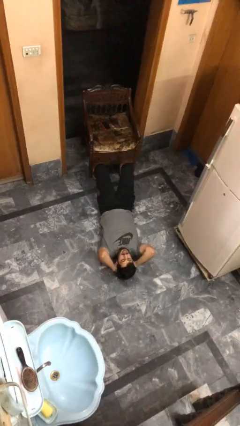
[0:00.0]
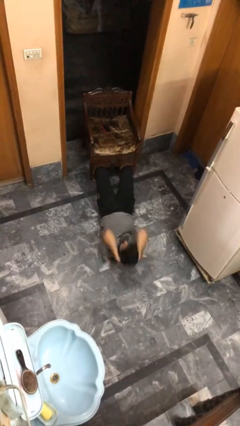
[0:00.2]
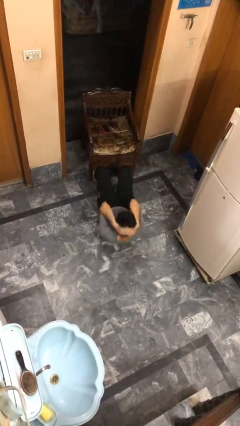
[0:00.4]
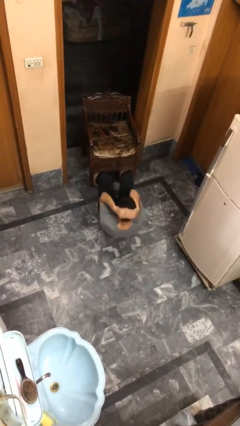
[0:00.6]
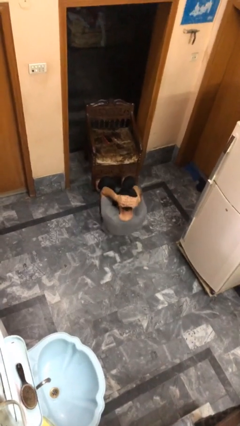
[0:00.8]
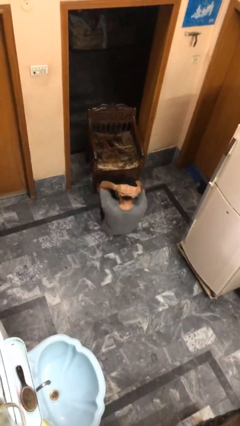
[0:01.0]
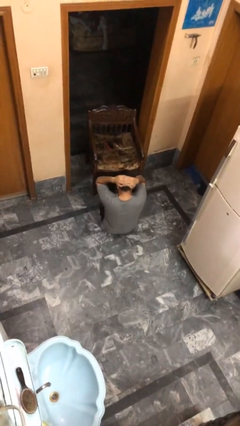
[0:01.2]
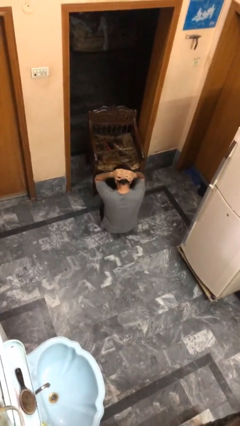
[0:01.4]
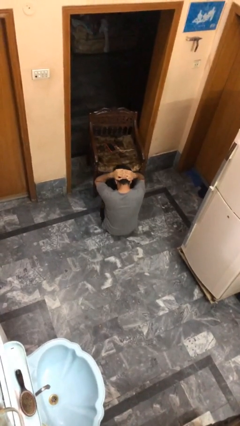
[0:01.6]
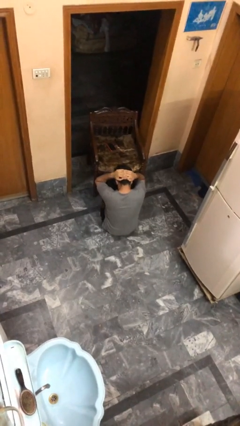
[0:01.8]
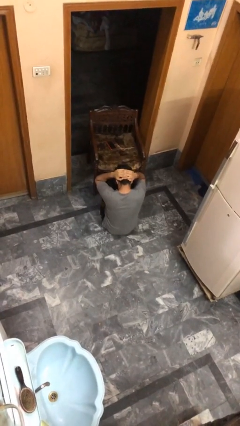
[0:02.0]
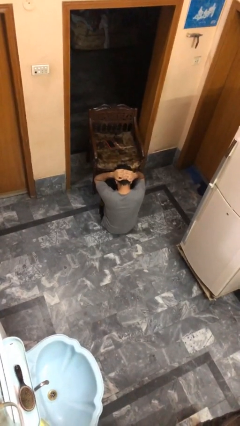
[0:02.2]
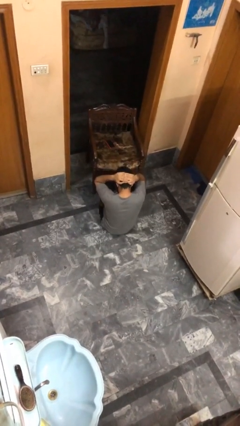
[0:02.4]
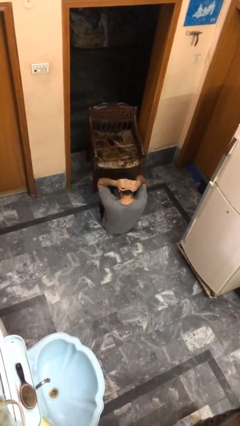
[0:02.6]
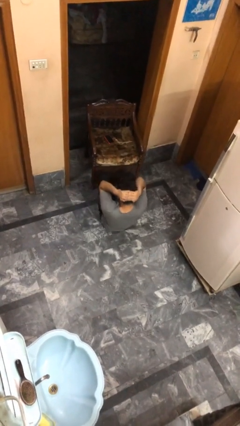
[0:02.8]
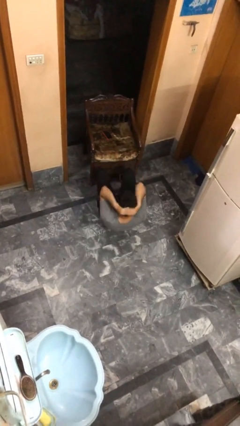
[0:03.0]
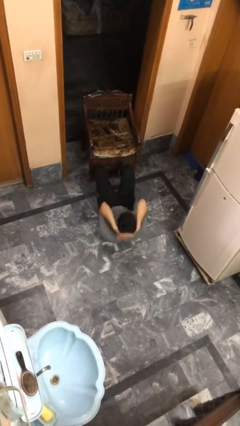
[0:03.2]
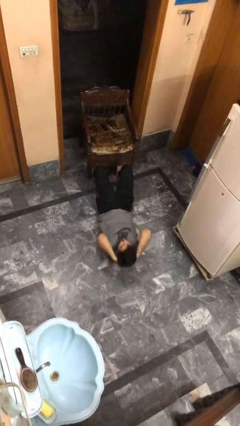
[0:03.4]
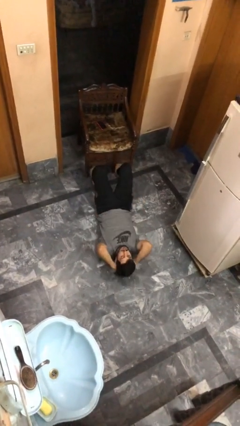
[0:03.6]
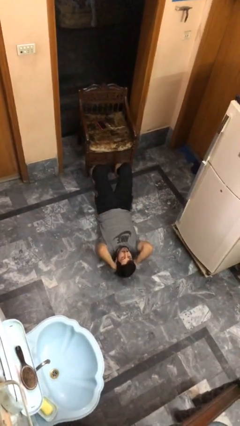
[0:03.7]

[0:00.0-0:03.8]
person exercises with situp

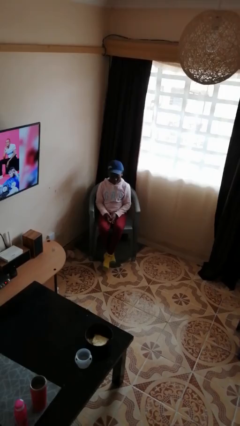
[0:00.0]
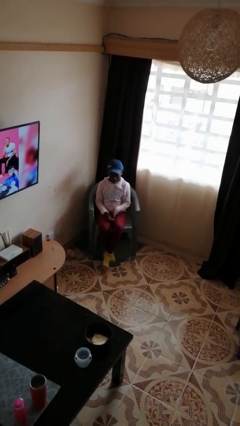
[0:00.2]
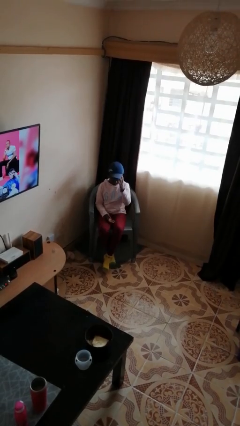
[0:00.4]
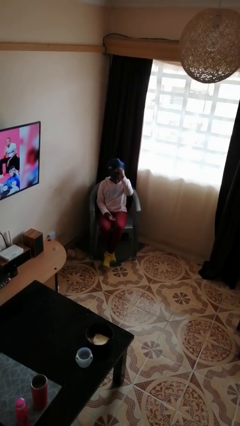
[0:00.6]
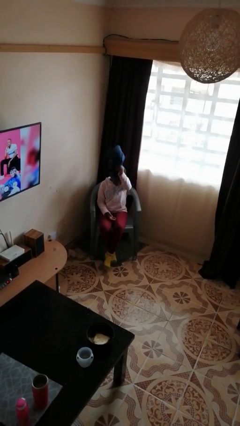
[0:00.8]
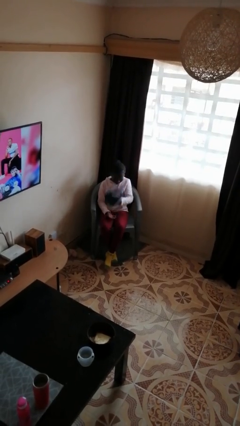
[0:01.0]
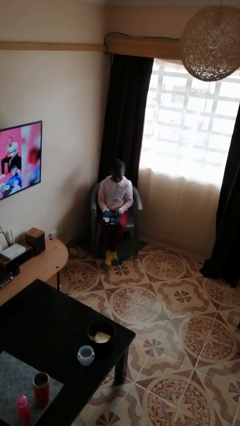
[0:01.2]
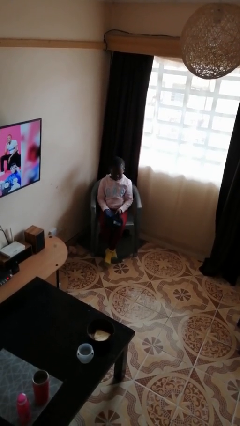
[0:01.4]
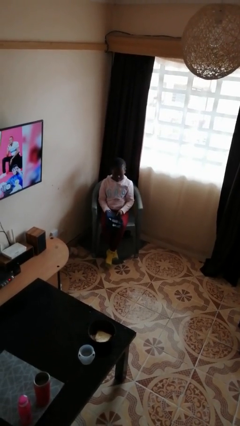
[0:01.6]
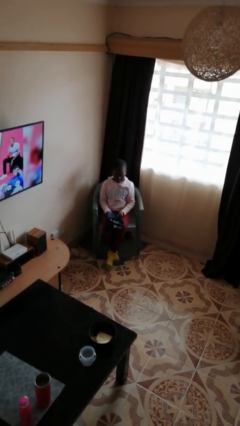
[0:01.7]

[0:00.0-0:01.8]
person takes off hat

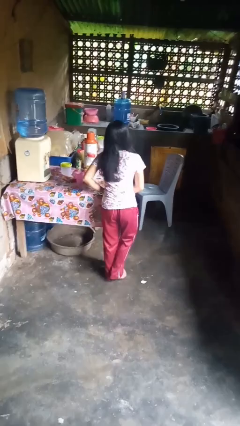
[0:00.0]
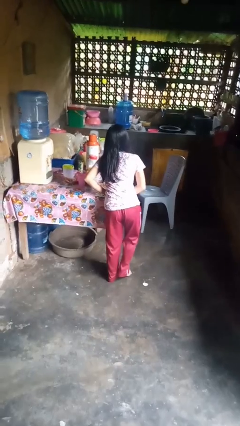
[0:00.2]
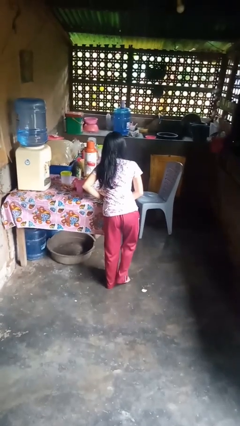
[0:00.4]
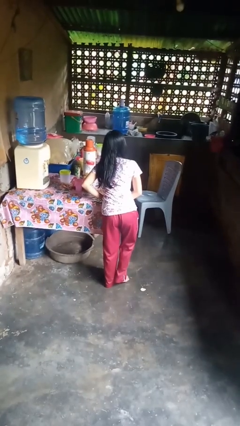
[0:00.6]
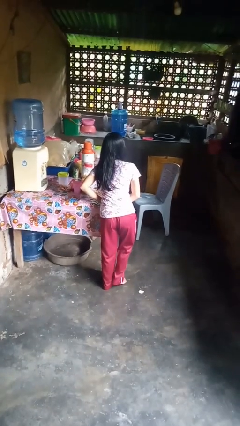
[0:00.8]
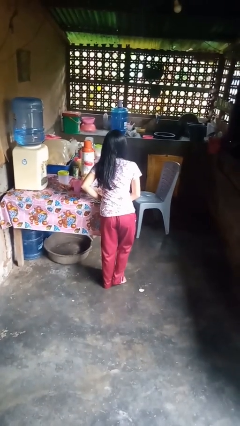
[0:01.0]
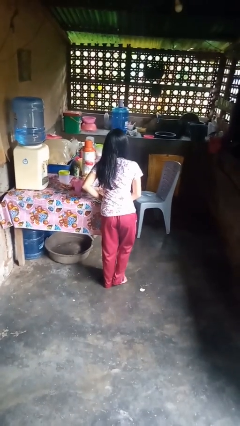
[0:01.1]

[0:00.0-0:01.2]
person bumps into table

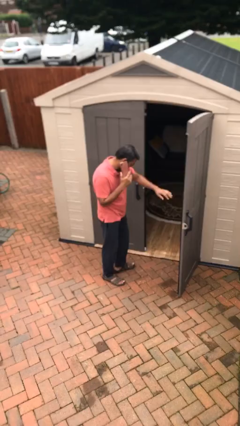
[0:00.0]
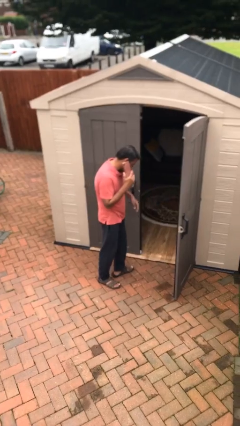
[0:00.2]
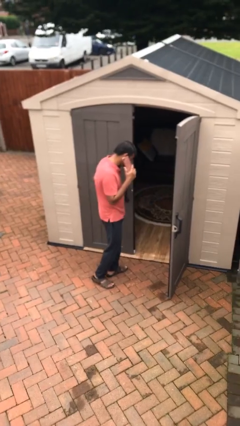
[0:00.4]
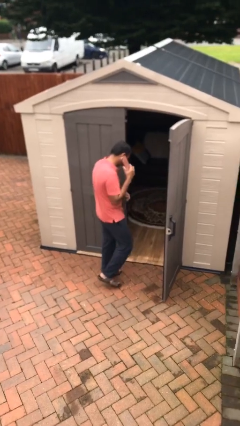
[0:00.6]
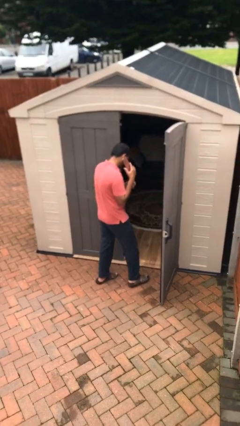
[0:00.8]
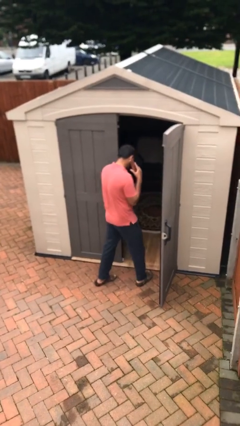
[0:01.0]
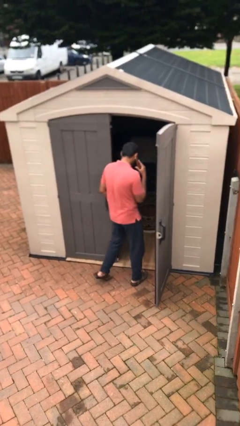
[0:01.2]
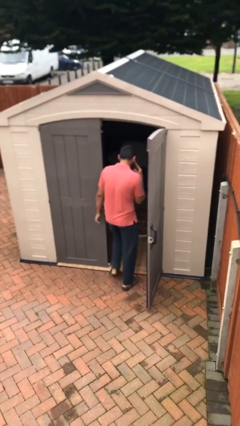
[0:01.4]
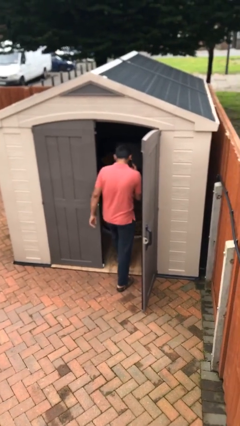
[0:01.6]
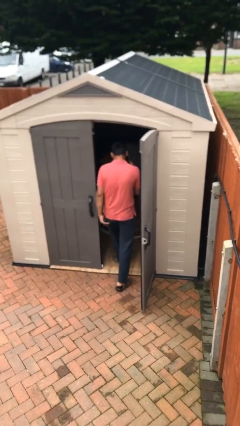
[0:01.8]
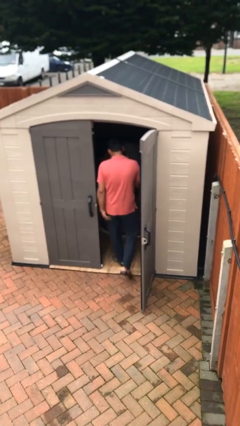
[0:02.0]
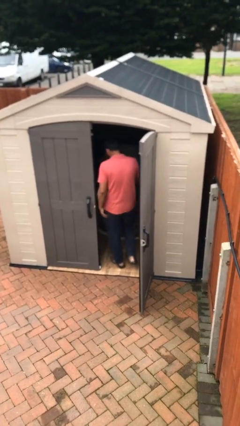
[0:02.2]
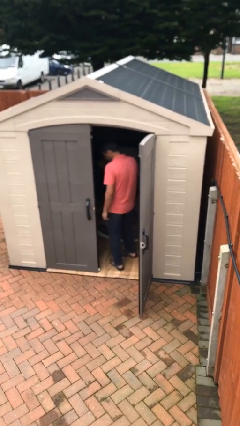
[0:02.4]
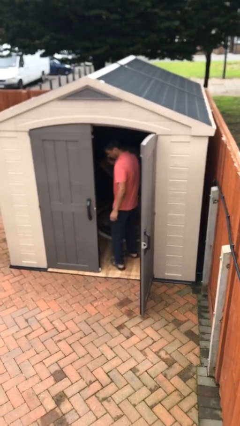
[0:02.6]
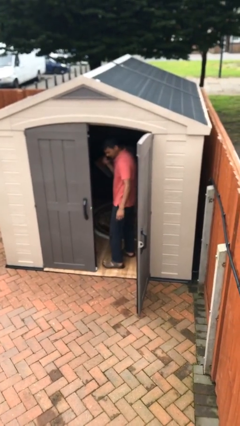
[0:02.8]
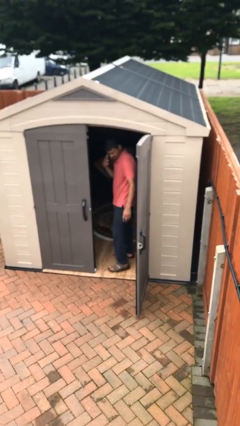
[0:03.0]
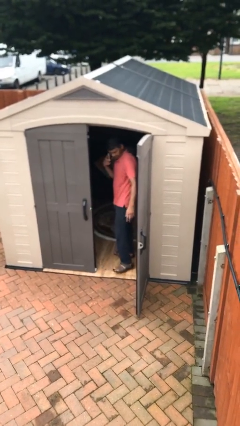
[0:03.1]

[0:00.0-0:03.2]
person exits scene through structure

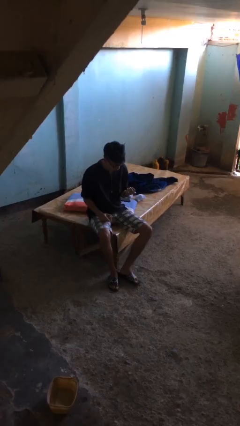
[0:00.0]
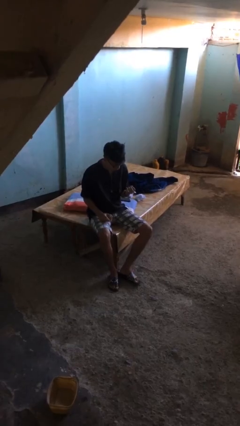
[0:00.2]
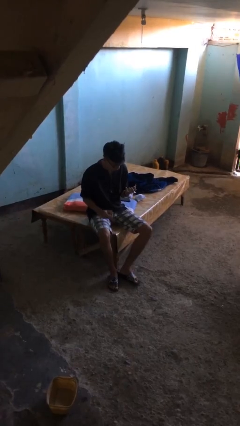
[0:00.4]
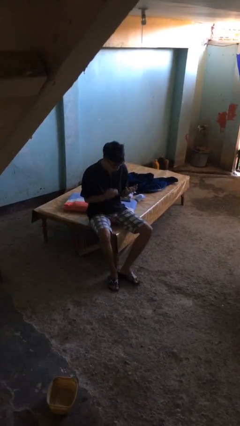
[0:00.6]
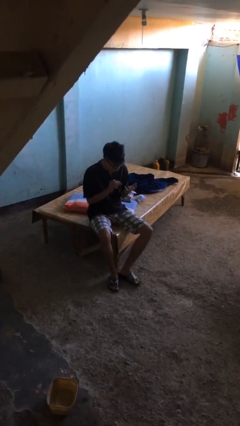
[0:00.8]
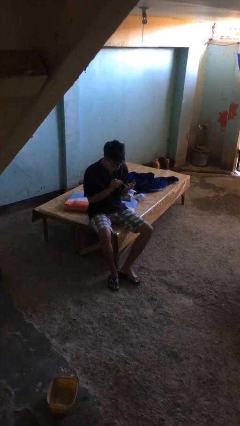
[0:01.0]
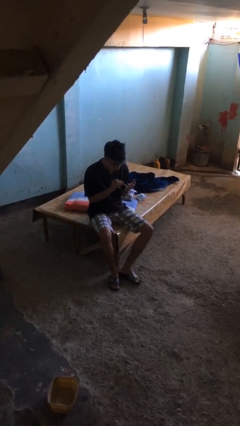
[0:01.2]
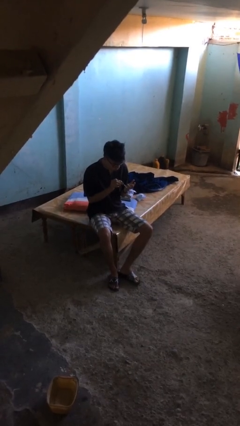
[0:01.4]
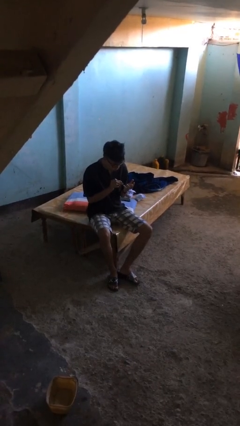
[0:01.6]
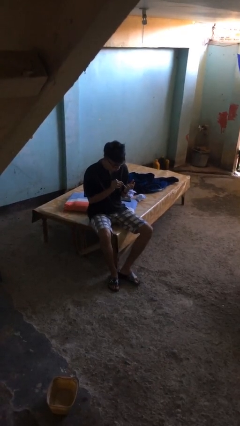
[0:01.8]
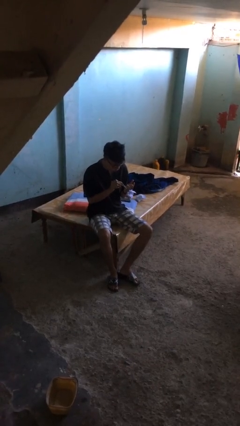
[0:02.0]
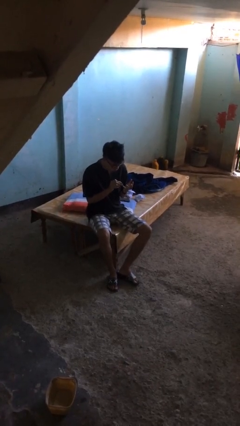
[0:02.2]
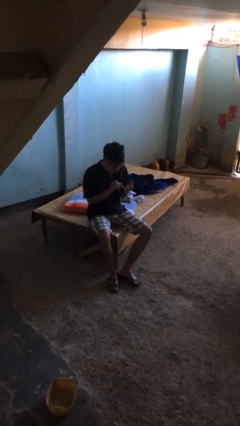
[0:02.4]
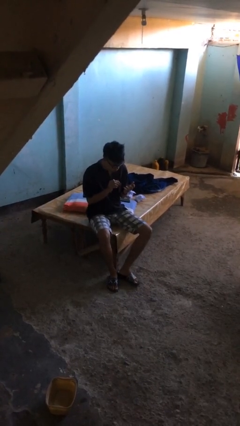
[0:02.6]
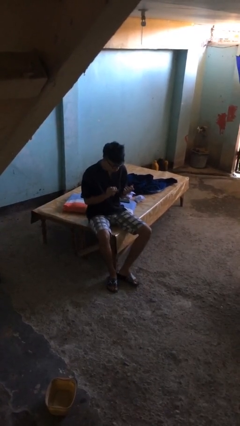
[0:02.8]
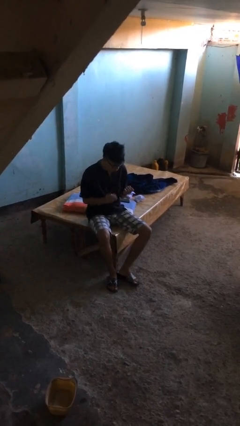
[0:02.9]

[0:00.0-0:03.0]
person clips fingernails

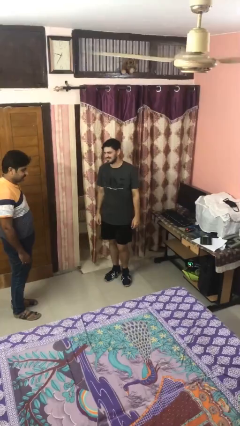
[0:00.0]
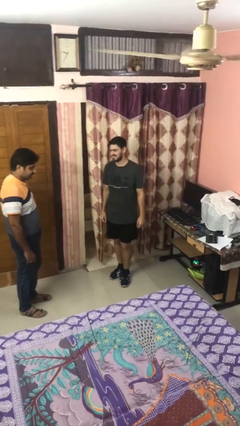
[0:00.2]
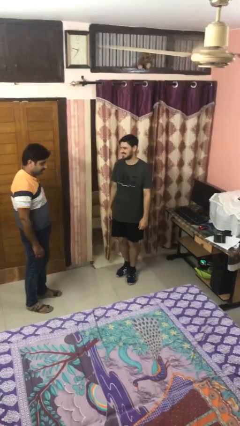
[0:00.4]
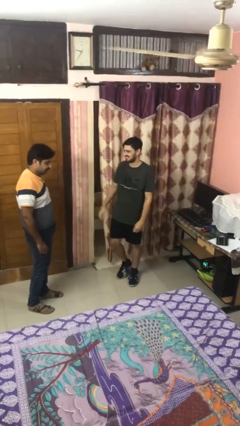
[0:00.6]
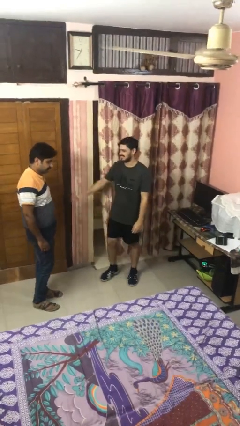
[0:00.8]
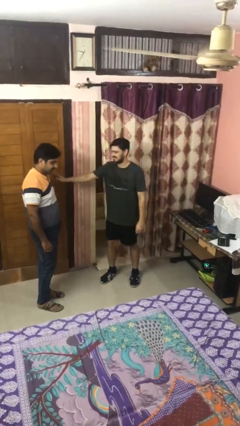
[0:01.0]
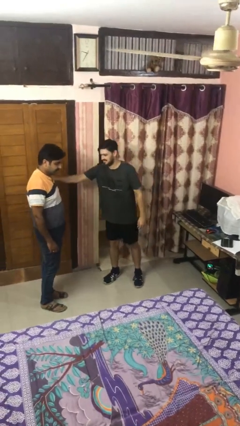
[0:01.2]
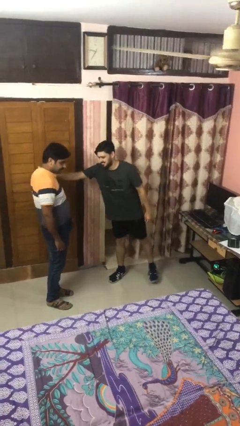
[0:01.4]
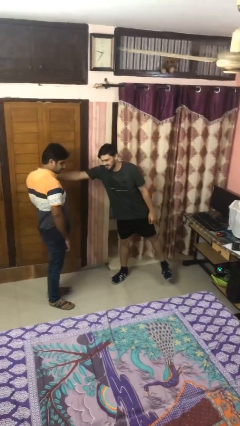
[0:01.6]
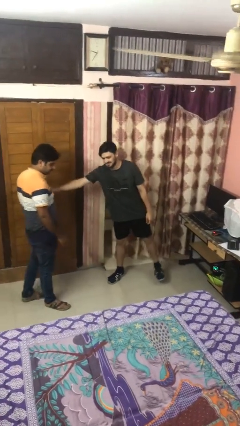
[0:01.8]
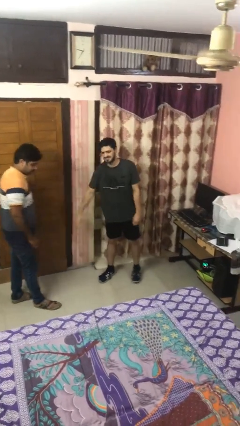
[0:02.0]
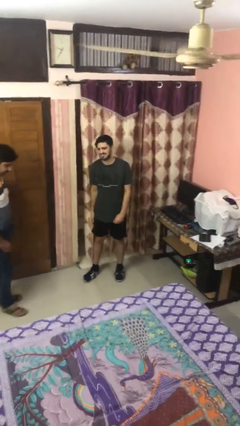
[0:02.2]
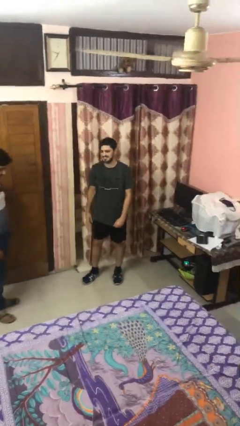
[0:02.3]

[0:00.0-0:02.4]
person shoves person

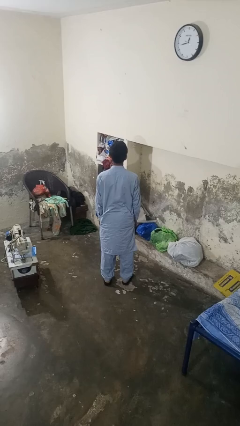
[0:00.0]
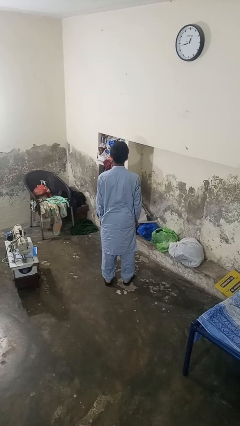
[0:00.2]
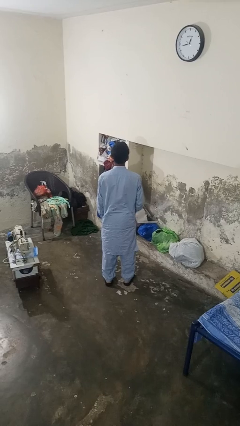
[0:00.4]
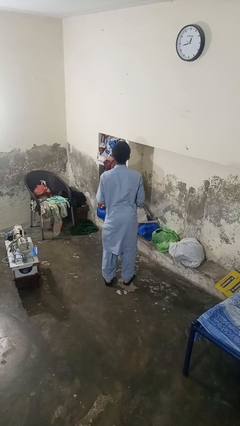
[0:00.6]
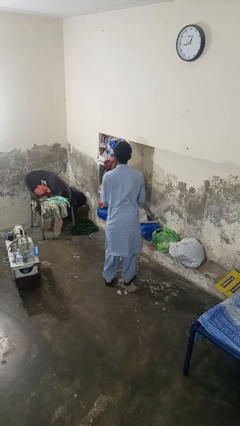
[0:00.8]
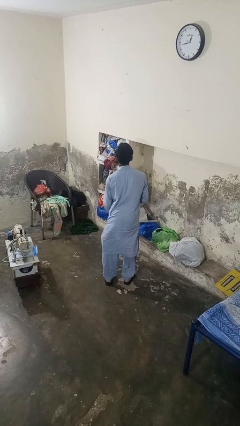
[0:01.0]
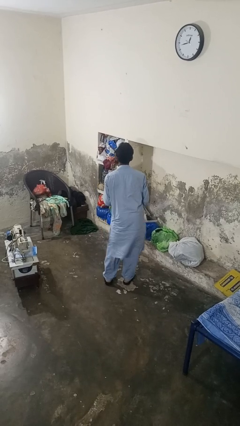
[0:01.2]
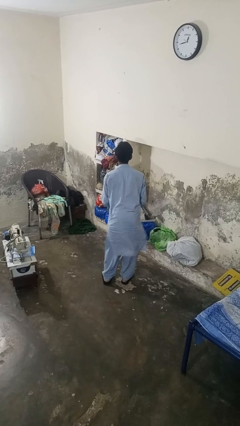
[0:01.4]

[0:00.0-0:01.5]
person wiggles hips

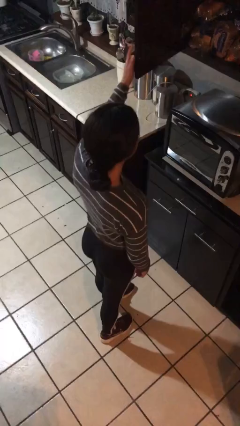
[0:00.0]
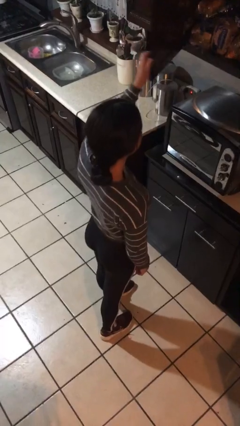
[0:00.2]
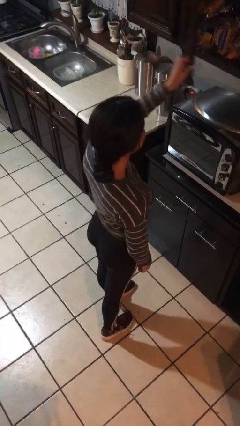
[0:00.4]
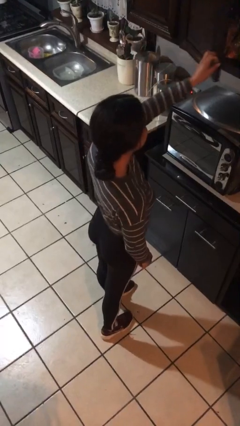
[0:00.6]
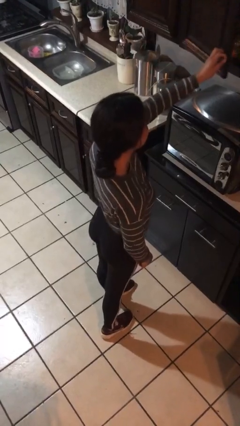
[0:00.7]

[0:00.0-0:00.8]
person closes cabinet
